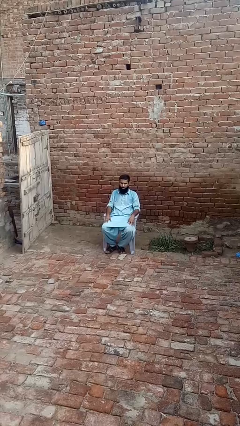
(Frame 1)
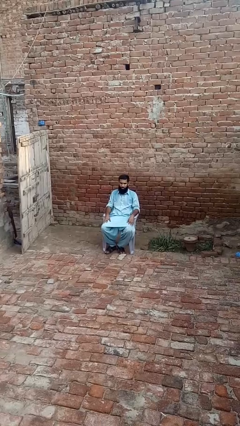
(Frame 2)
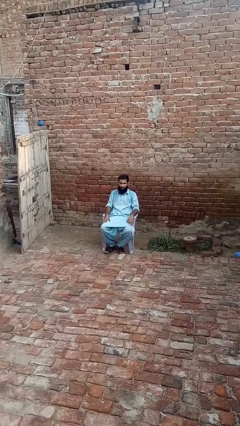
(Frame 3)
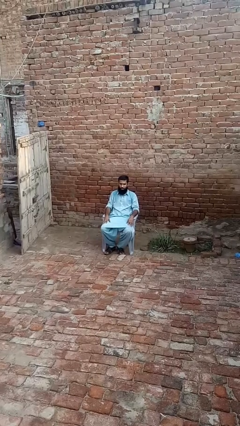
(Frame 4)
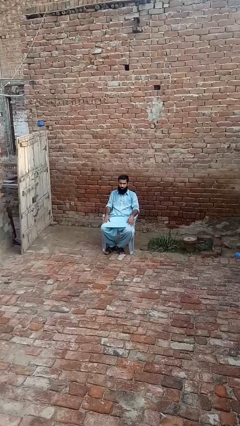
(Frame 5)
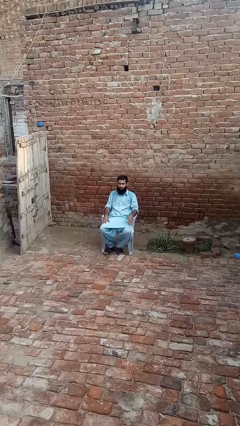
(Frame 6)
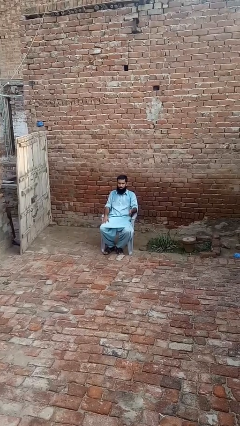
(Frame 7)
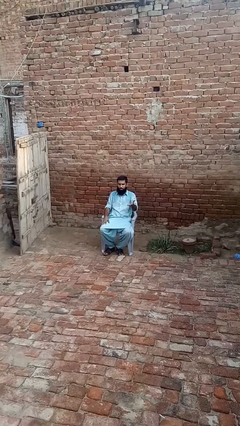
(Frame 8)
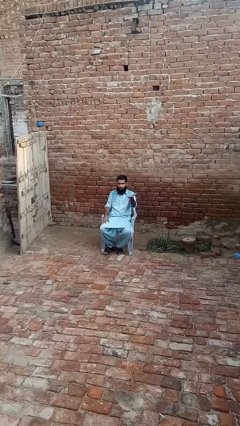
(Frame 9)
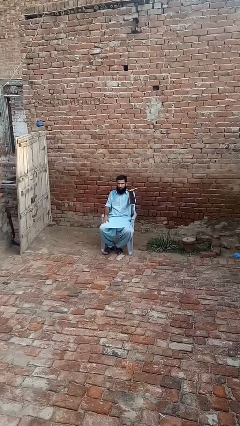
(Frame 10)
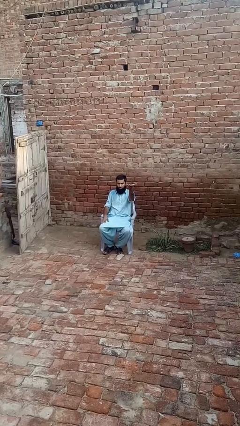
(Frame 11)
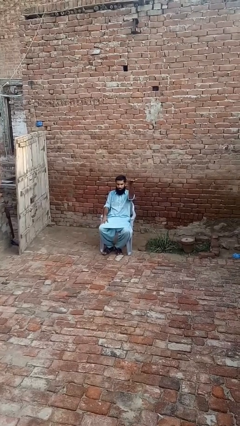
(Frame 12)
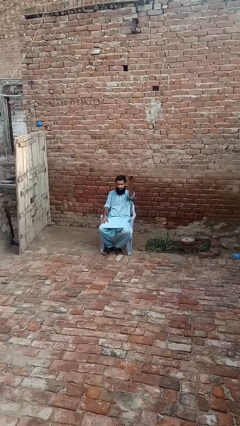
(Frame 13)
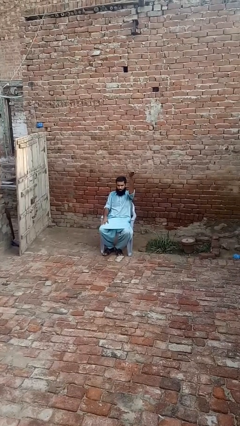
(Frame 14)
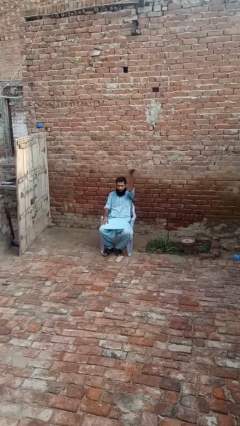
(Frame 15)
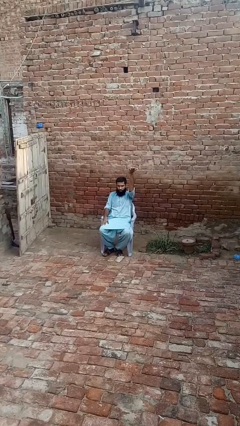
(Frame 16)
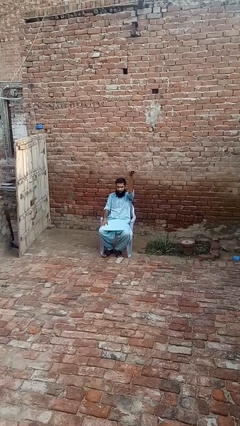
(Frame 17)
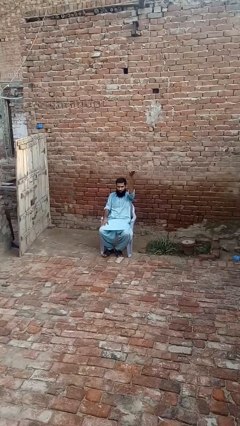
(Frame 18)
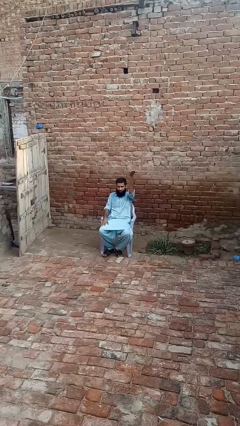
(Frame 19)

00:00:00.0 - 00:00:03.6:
person gestures swipe up

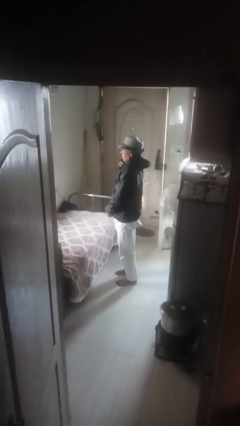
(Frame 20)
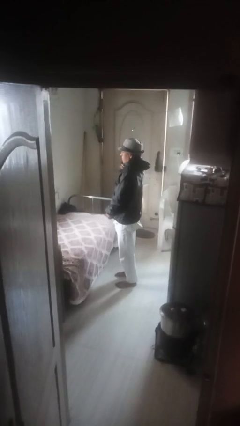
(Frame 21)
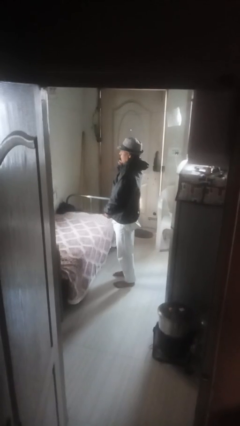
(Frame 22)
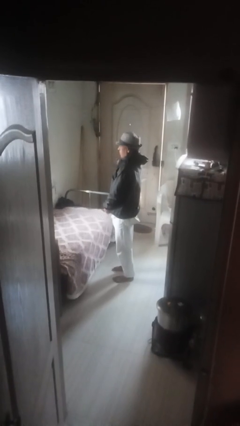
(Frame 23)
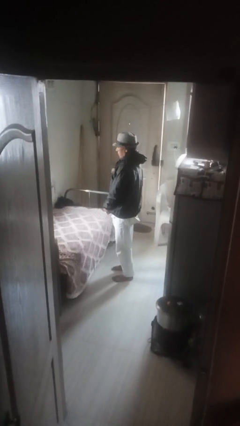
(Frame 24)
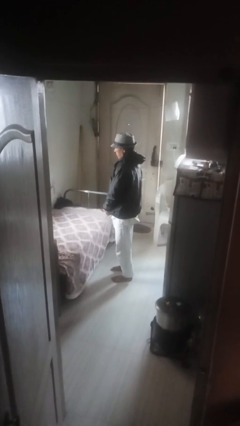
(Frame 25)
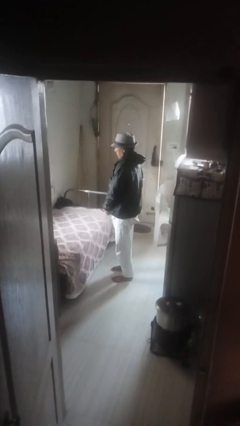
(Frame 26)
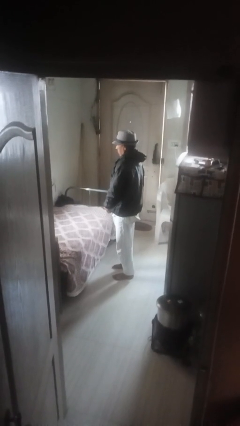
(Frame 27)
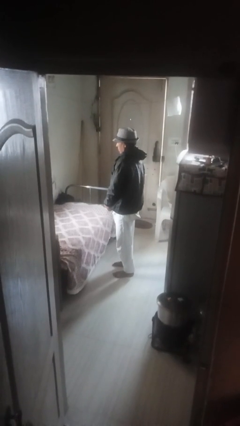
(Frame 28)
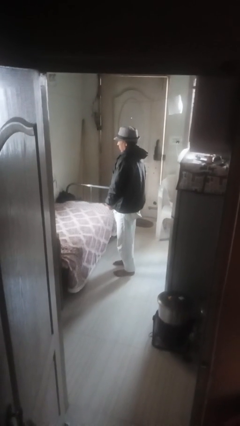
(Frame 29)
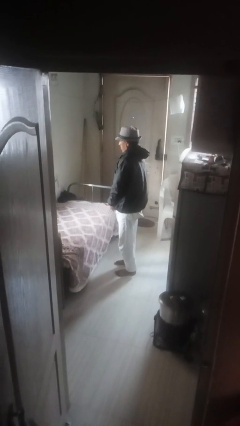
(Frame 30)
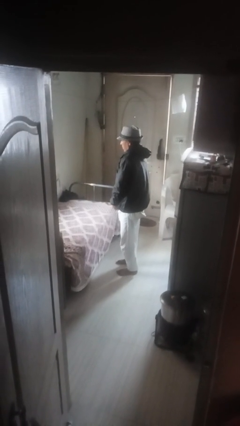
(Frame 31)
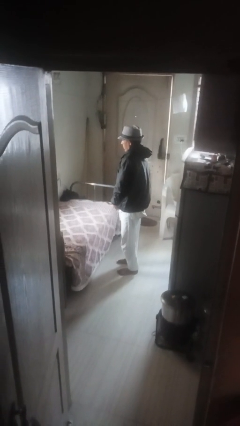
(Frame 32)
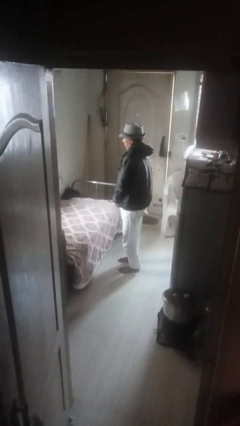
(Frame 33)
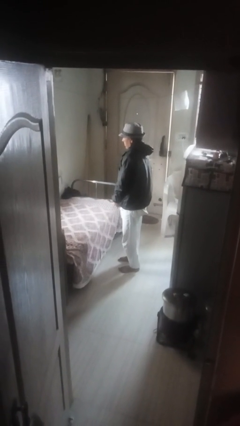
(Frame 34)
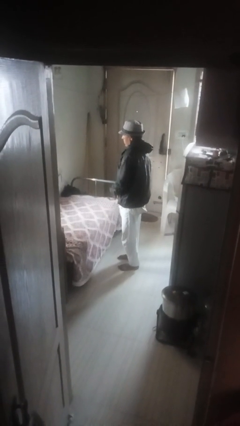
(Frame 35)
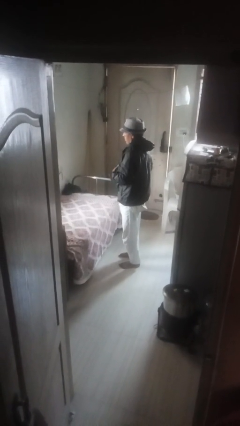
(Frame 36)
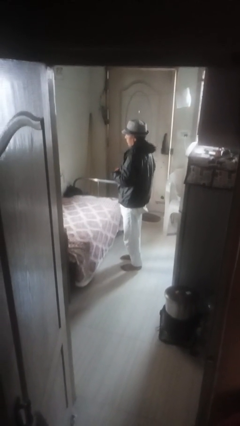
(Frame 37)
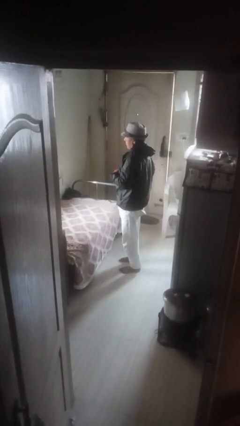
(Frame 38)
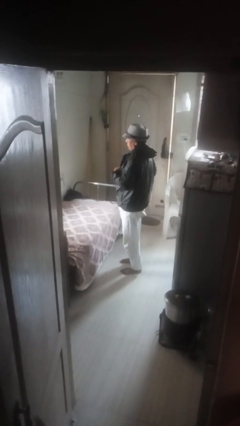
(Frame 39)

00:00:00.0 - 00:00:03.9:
person unzips jacket

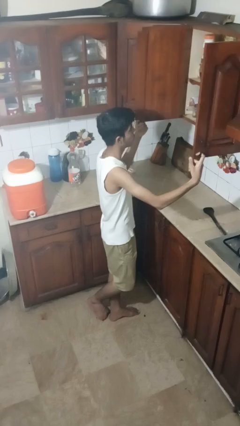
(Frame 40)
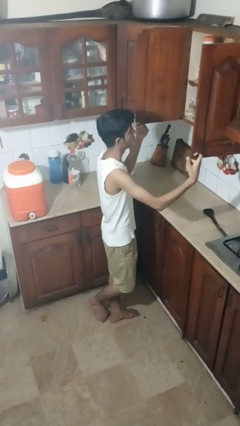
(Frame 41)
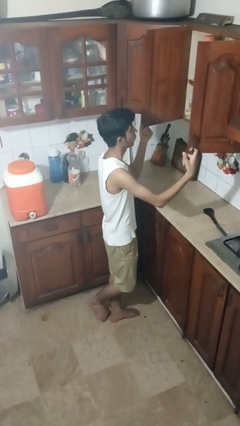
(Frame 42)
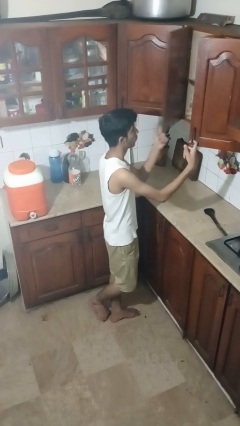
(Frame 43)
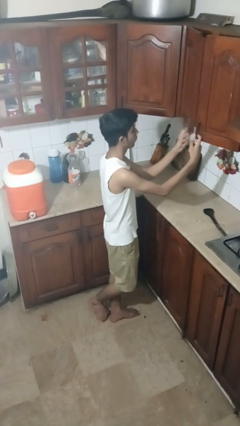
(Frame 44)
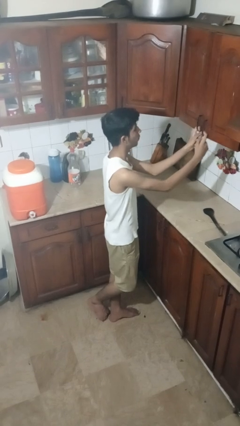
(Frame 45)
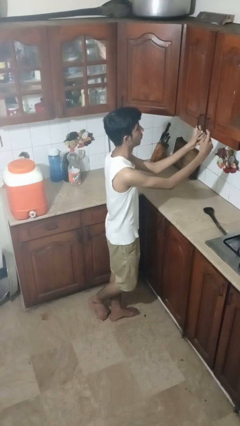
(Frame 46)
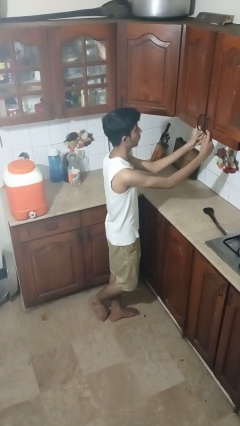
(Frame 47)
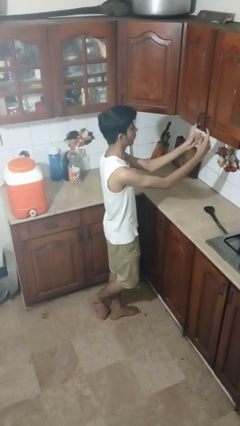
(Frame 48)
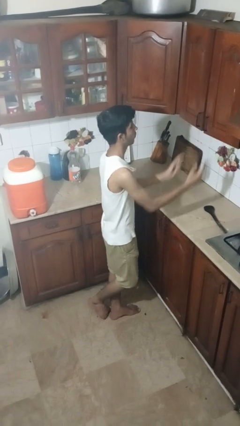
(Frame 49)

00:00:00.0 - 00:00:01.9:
person closes cabinet

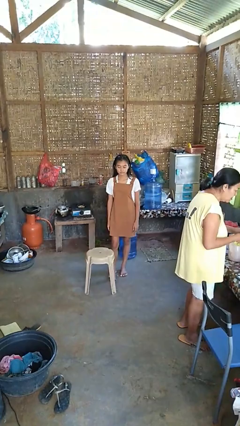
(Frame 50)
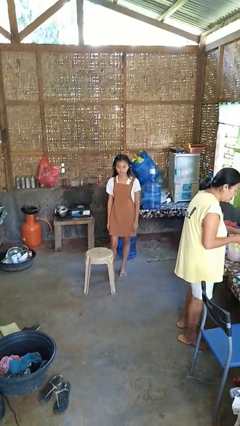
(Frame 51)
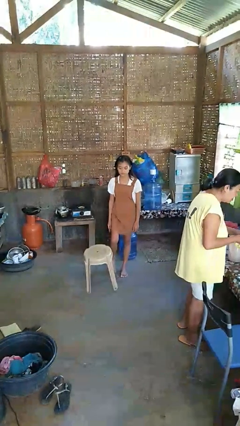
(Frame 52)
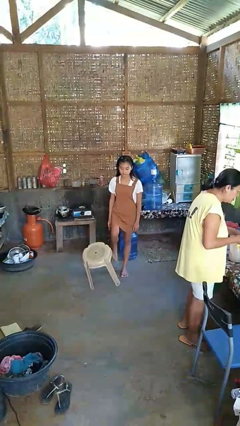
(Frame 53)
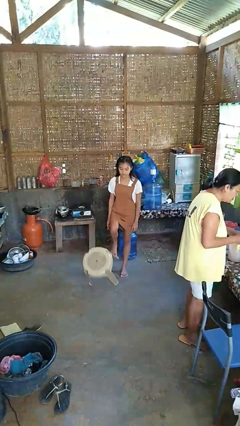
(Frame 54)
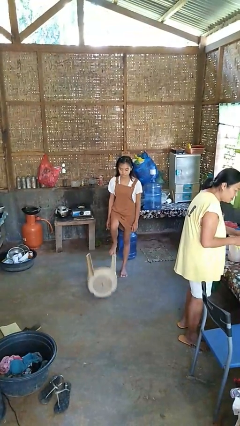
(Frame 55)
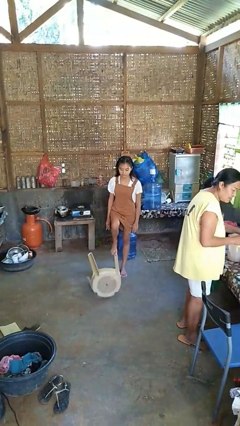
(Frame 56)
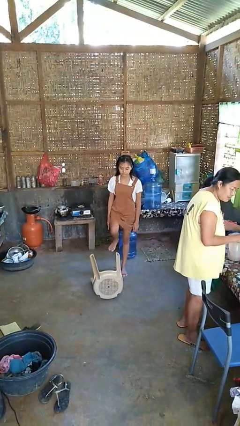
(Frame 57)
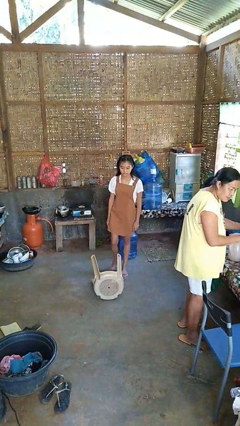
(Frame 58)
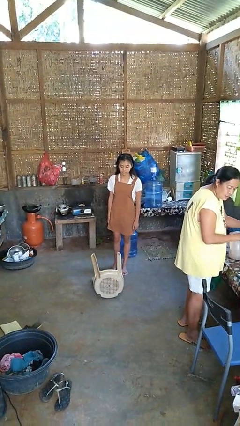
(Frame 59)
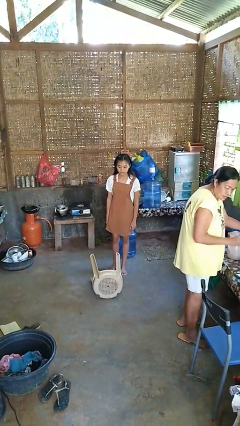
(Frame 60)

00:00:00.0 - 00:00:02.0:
person knocks over furniture

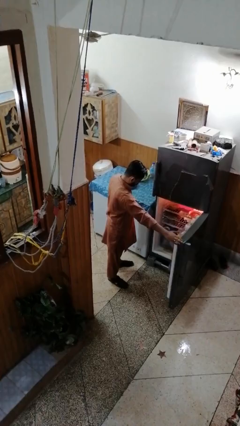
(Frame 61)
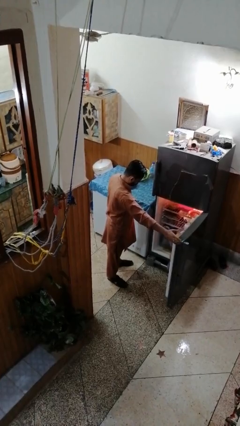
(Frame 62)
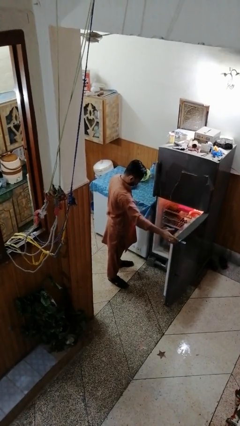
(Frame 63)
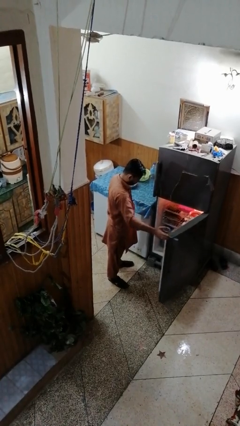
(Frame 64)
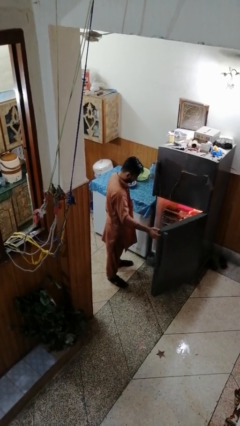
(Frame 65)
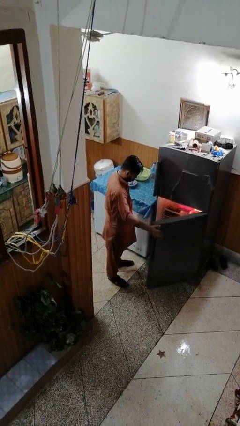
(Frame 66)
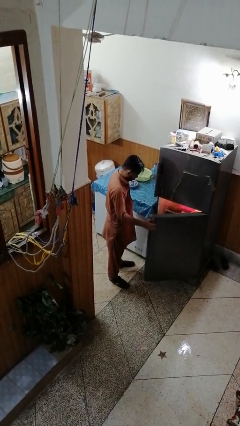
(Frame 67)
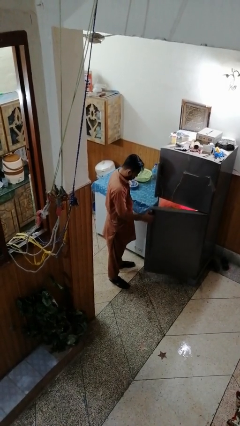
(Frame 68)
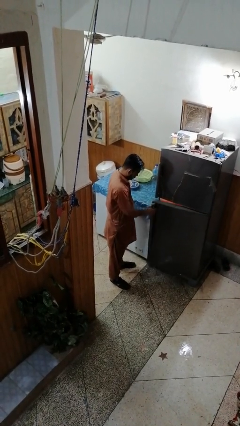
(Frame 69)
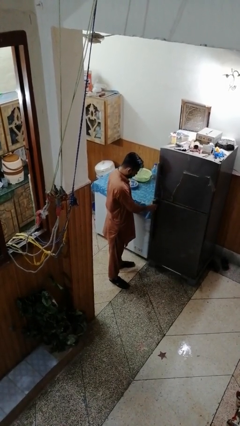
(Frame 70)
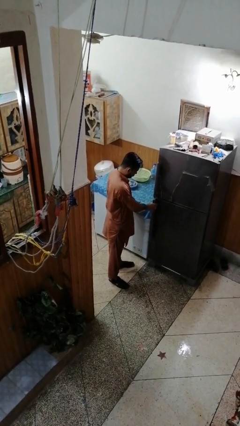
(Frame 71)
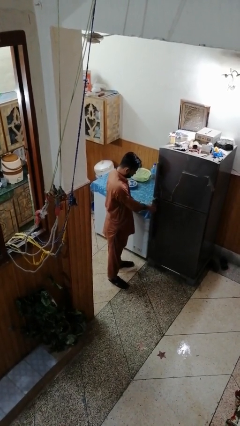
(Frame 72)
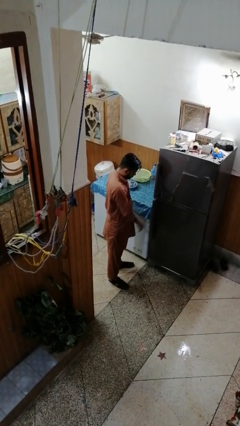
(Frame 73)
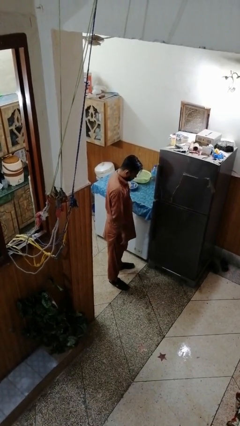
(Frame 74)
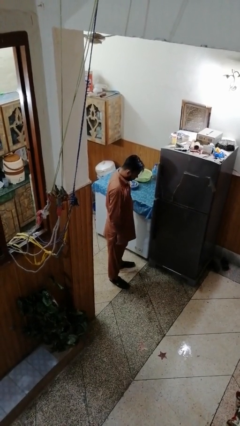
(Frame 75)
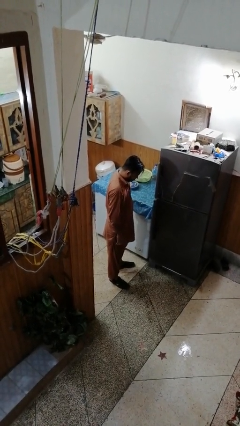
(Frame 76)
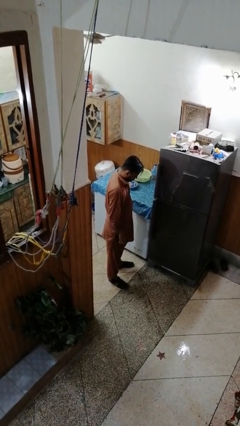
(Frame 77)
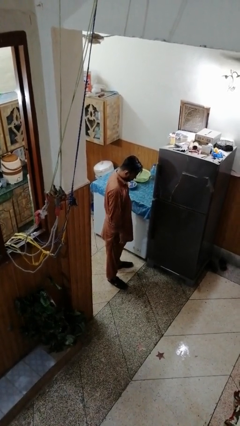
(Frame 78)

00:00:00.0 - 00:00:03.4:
person closes refrigerator

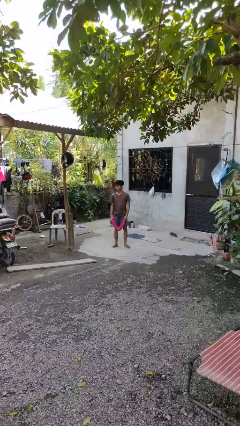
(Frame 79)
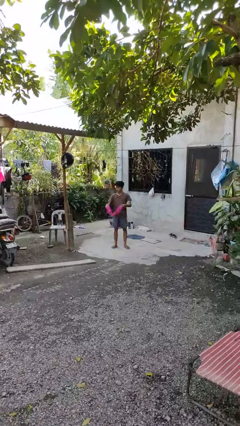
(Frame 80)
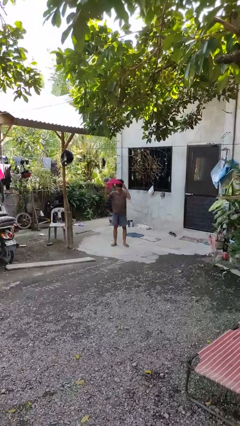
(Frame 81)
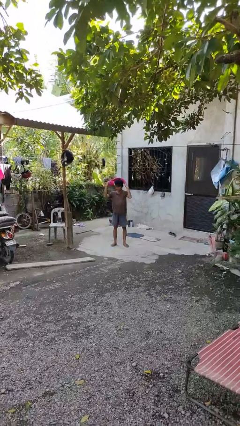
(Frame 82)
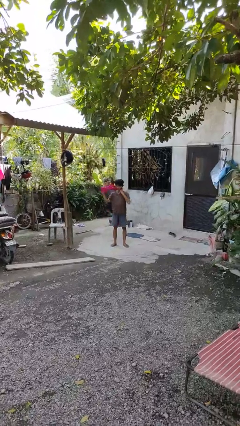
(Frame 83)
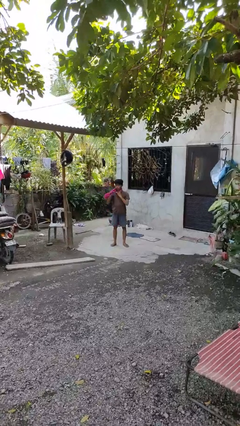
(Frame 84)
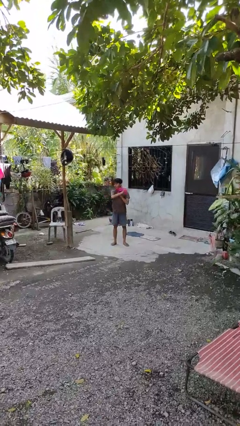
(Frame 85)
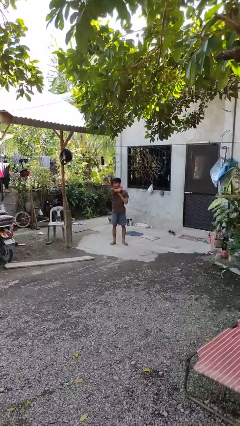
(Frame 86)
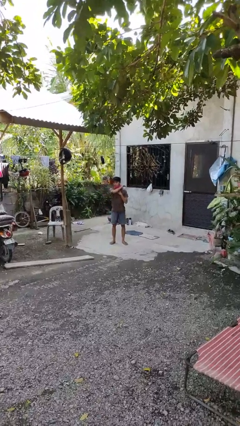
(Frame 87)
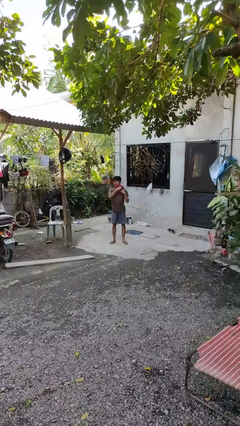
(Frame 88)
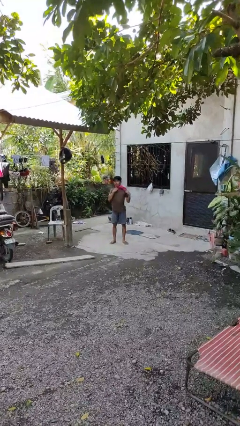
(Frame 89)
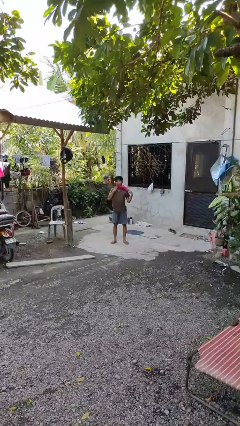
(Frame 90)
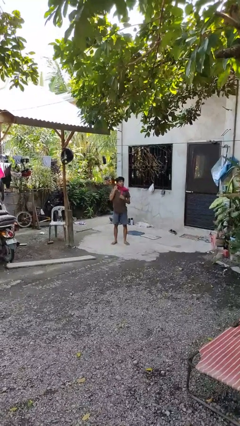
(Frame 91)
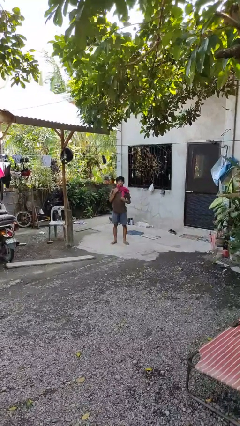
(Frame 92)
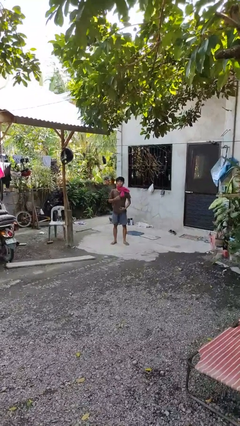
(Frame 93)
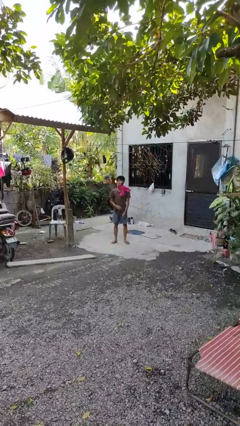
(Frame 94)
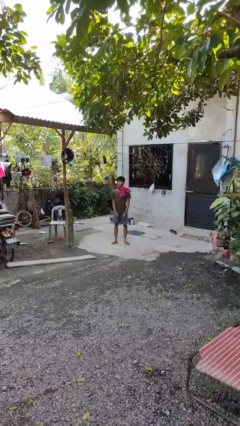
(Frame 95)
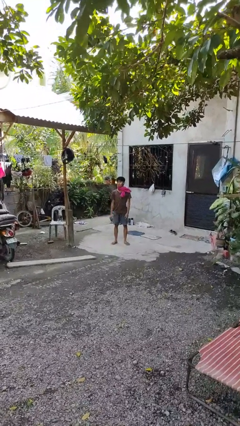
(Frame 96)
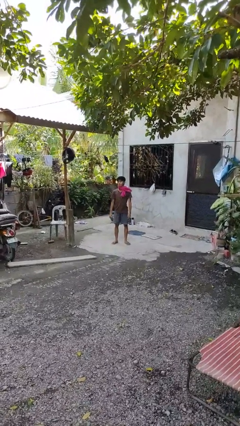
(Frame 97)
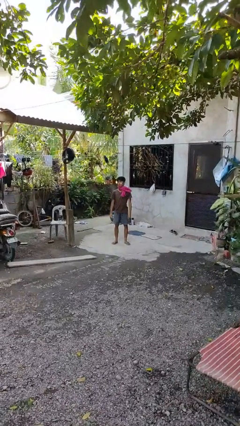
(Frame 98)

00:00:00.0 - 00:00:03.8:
person puts on scarf
